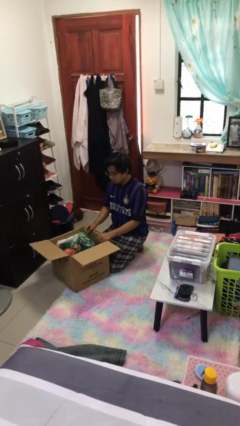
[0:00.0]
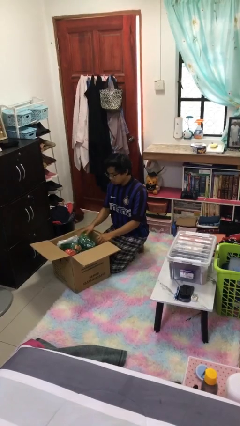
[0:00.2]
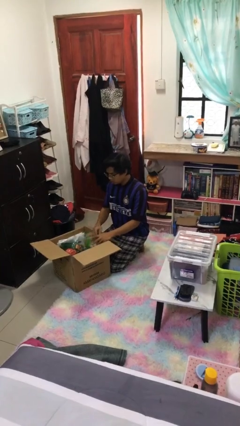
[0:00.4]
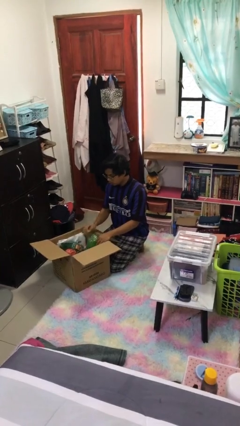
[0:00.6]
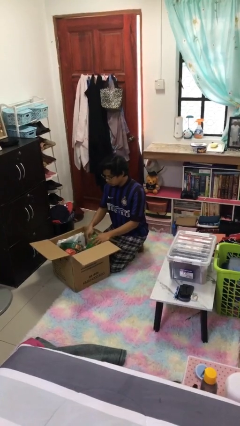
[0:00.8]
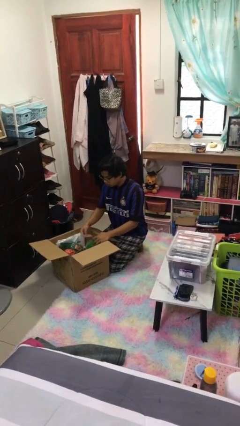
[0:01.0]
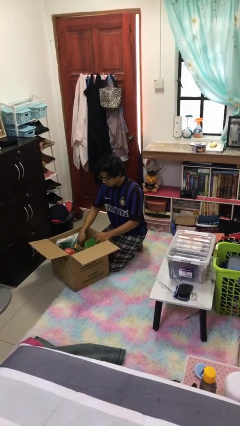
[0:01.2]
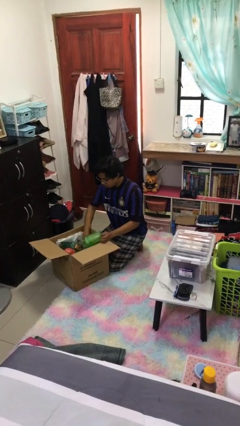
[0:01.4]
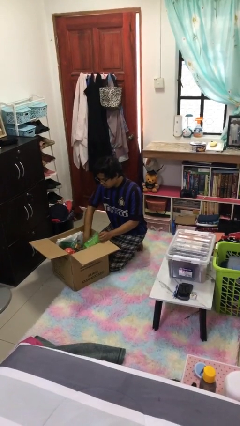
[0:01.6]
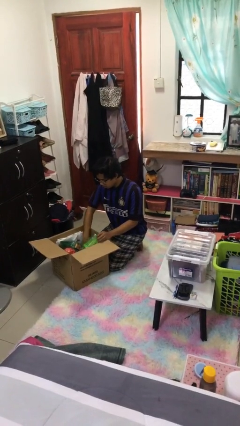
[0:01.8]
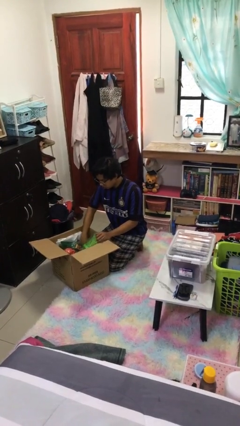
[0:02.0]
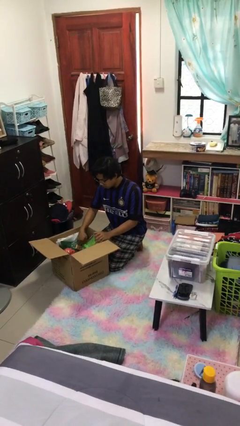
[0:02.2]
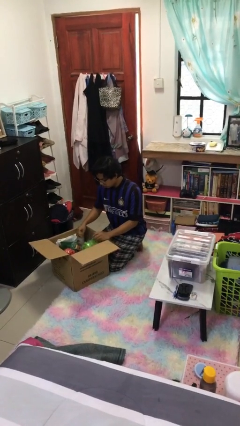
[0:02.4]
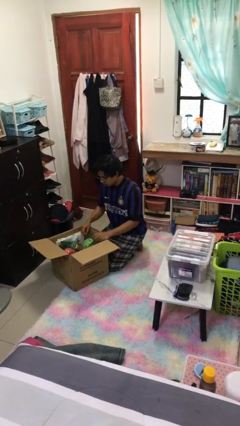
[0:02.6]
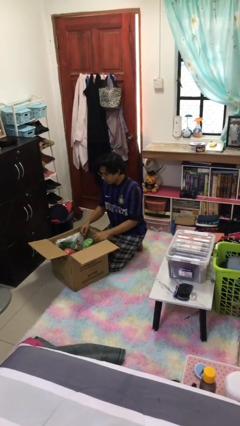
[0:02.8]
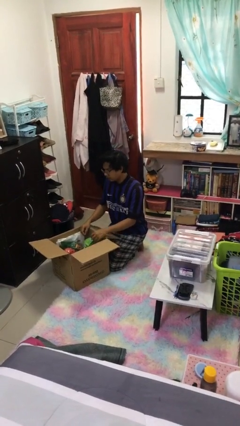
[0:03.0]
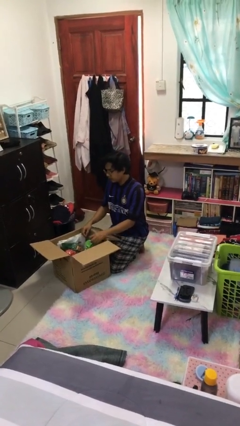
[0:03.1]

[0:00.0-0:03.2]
person searches in box

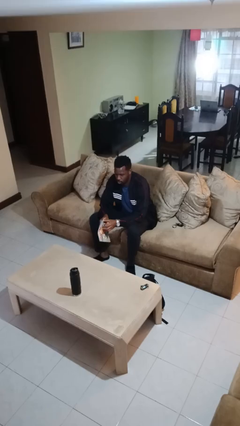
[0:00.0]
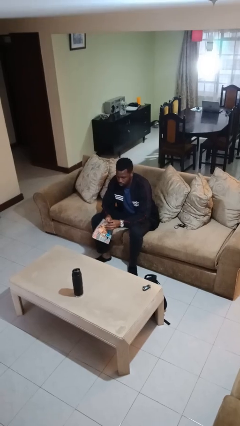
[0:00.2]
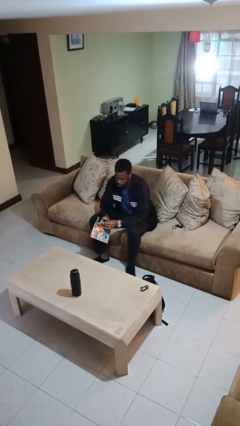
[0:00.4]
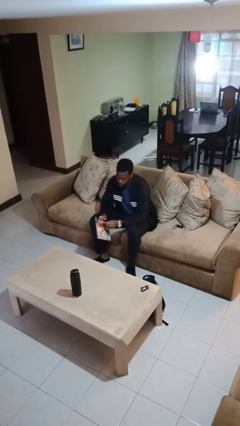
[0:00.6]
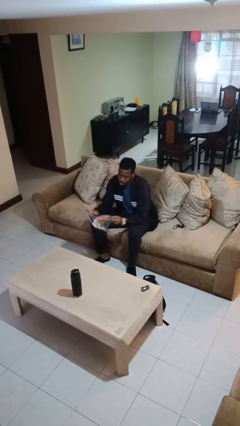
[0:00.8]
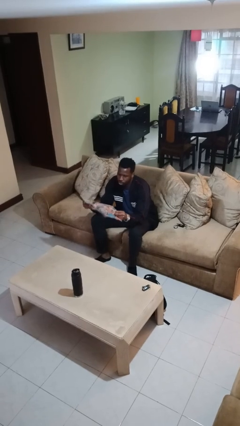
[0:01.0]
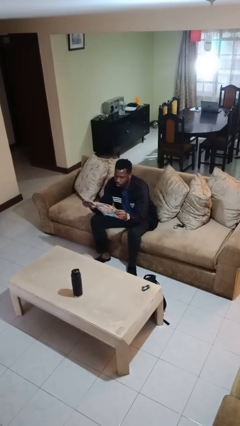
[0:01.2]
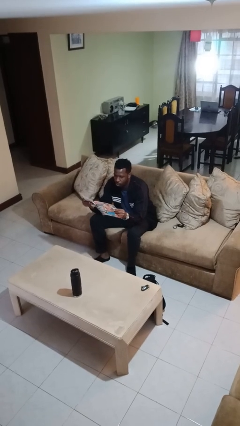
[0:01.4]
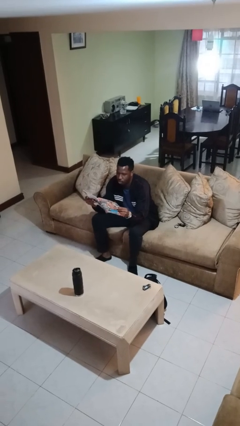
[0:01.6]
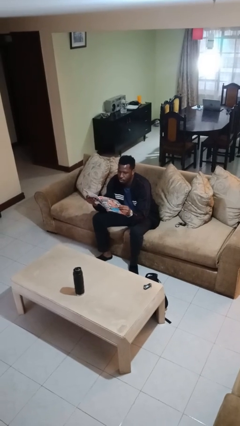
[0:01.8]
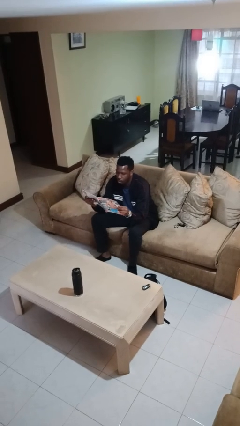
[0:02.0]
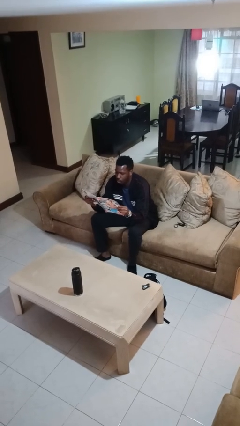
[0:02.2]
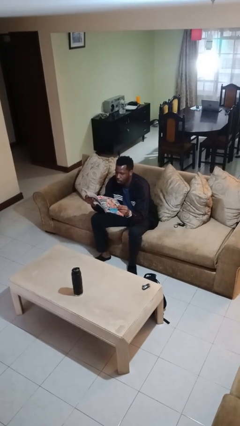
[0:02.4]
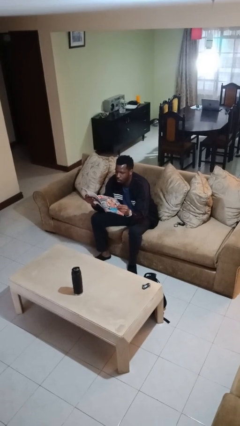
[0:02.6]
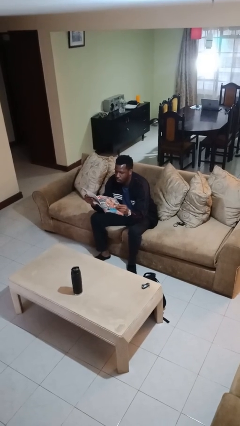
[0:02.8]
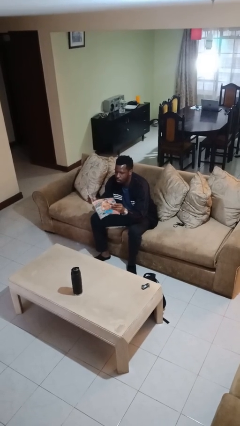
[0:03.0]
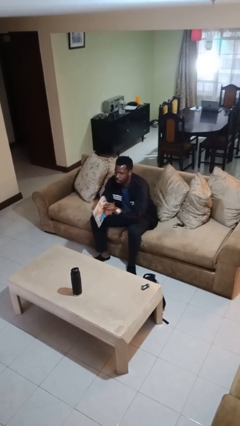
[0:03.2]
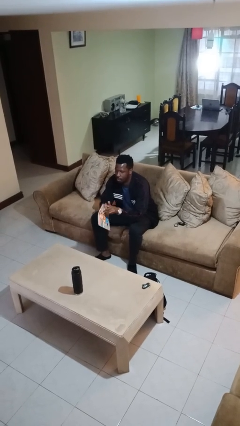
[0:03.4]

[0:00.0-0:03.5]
person reads magazine

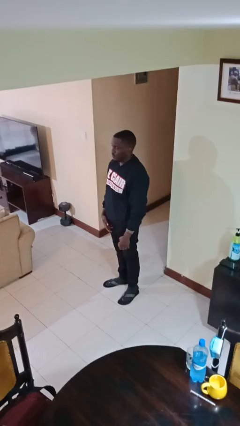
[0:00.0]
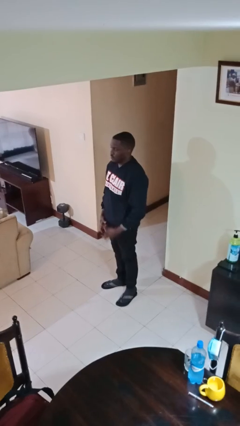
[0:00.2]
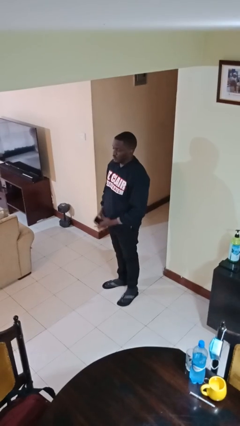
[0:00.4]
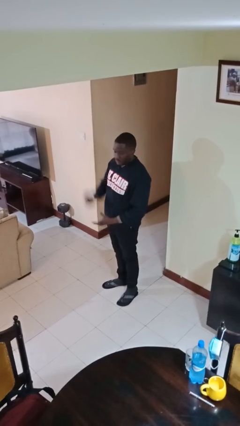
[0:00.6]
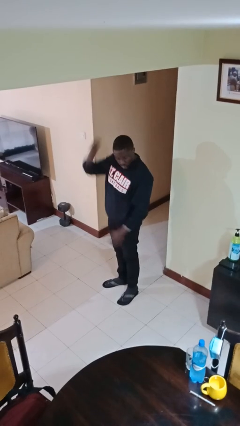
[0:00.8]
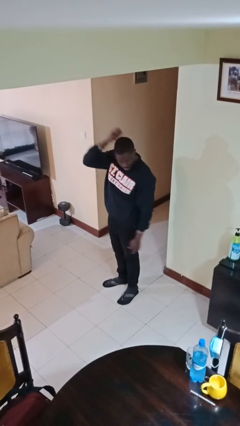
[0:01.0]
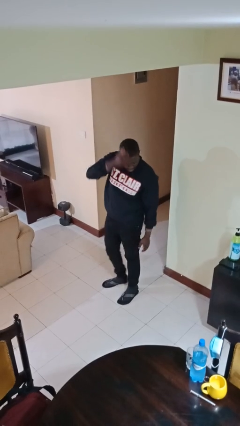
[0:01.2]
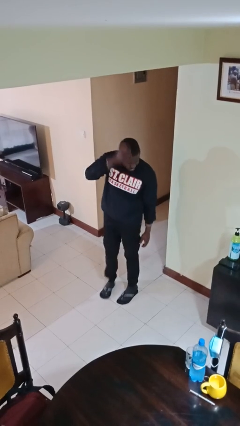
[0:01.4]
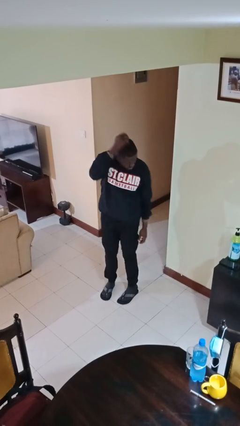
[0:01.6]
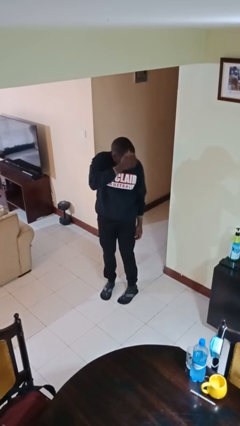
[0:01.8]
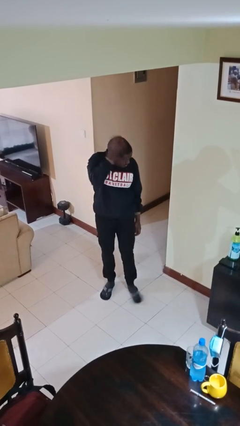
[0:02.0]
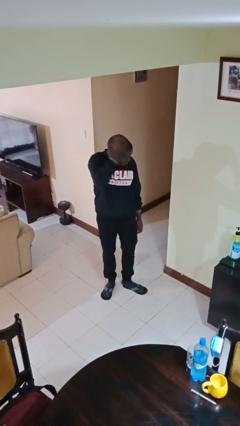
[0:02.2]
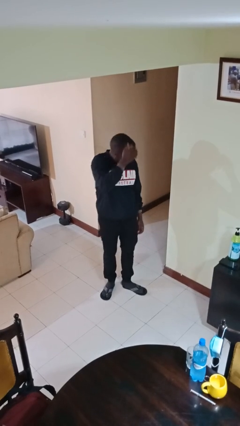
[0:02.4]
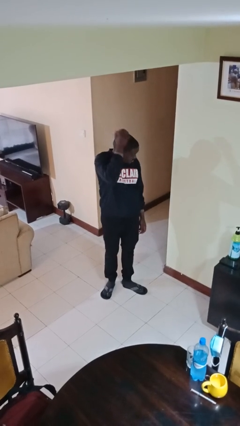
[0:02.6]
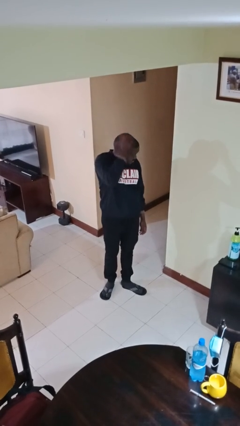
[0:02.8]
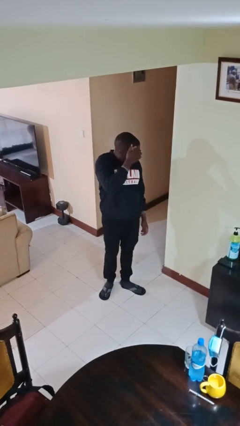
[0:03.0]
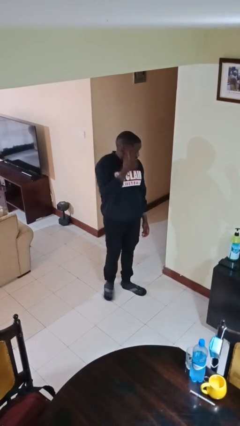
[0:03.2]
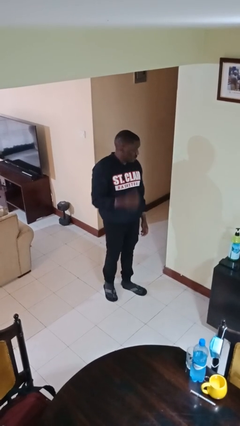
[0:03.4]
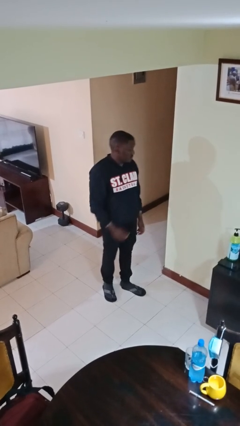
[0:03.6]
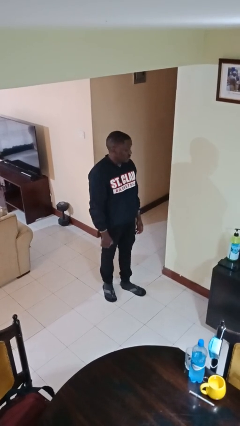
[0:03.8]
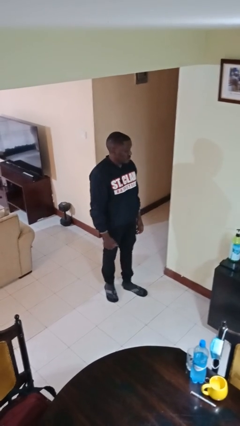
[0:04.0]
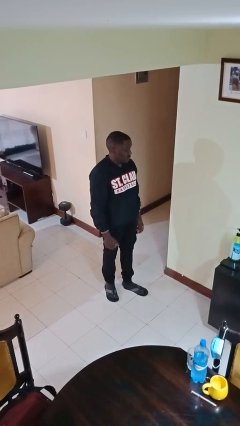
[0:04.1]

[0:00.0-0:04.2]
person brushes hair

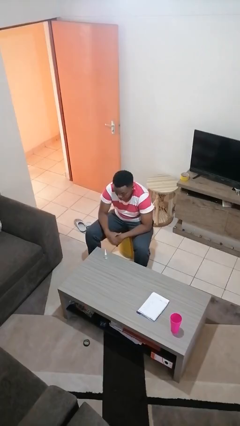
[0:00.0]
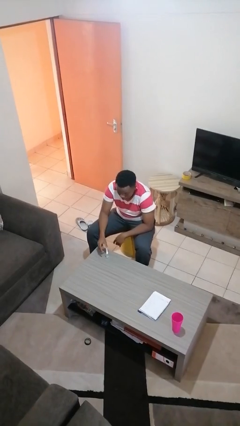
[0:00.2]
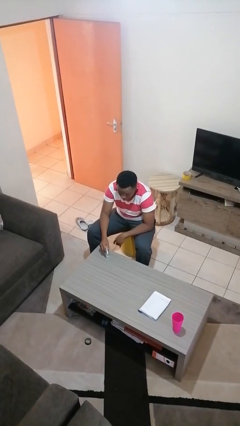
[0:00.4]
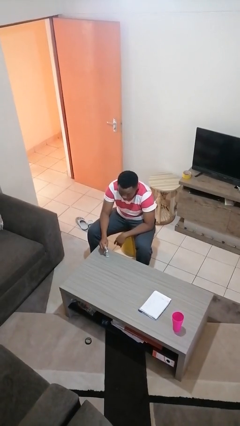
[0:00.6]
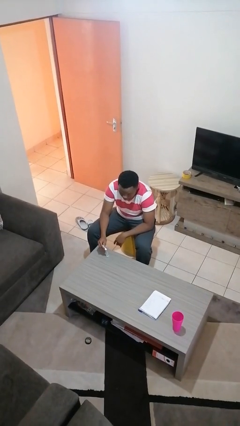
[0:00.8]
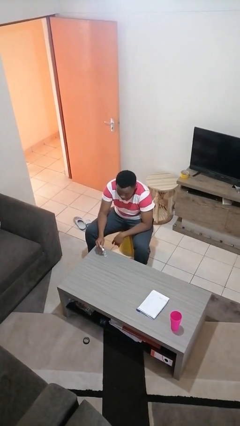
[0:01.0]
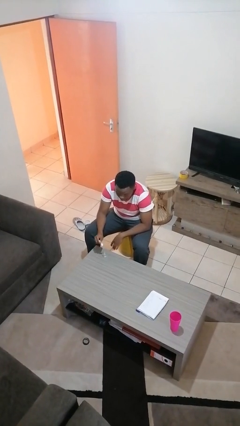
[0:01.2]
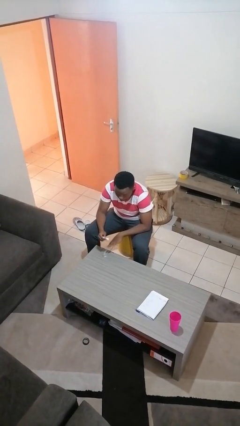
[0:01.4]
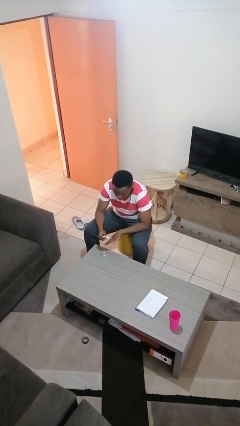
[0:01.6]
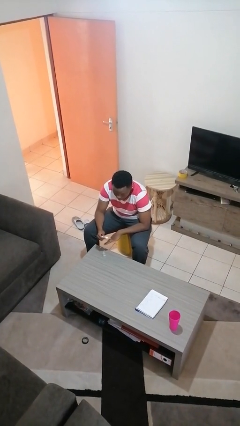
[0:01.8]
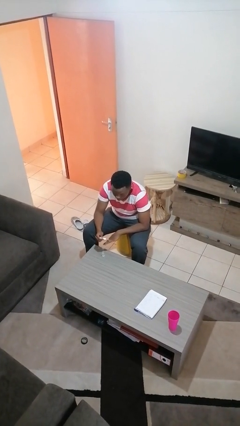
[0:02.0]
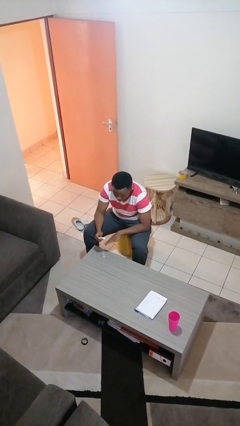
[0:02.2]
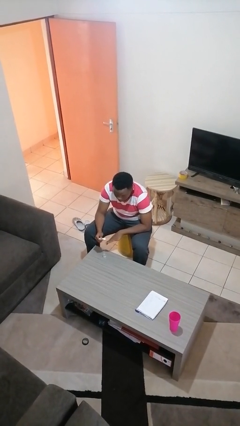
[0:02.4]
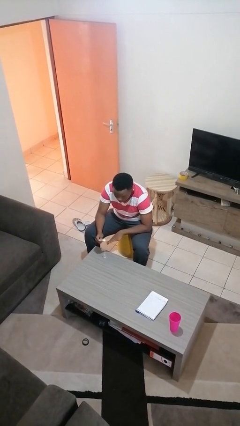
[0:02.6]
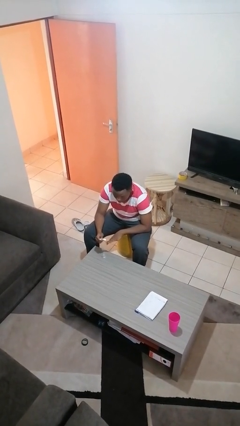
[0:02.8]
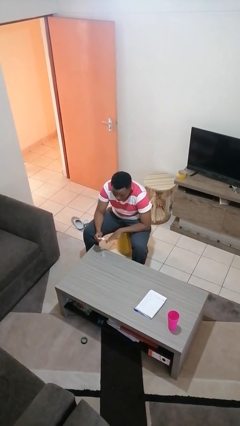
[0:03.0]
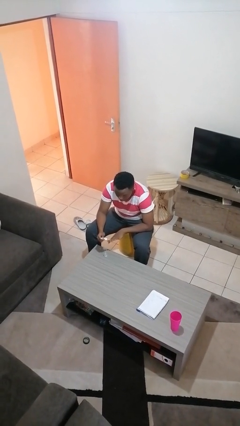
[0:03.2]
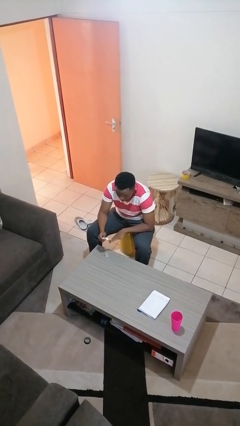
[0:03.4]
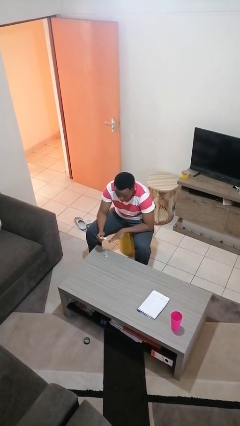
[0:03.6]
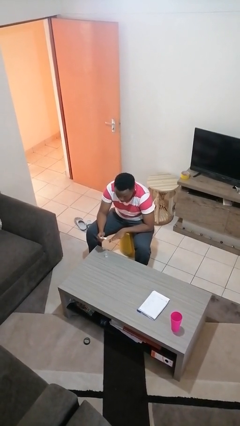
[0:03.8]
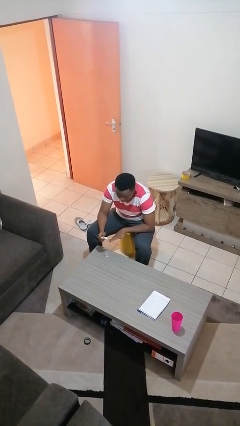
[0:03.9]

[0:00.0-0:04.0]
person paints fingernails

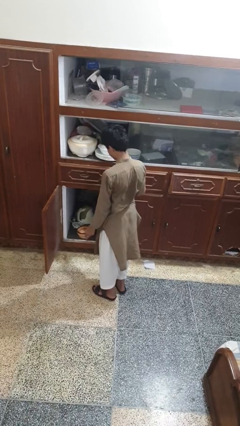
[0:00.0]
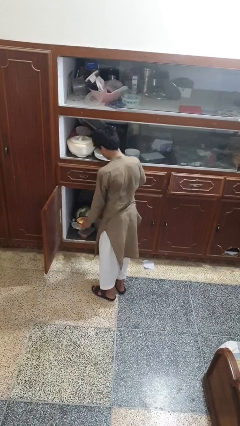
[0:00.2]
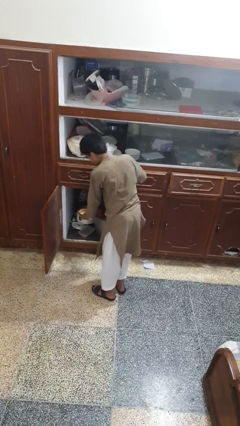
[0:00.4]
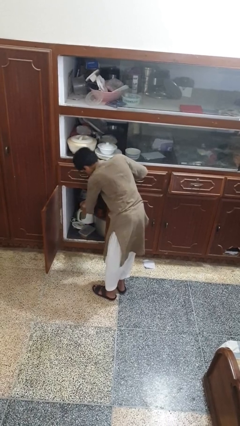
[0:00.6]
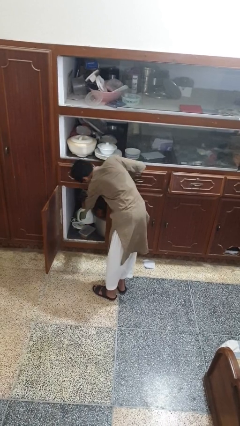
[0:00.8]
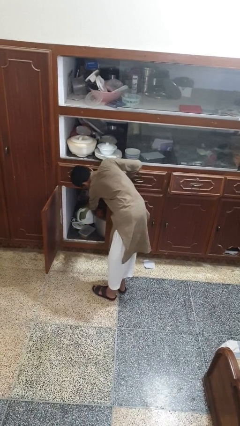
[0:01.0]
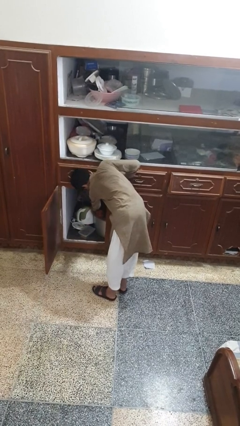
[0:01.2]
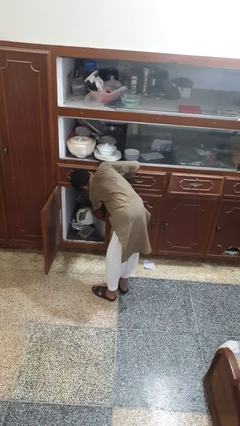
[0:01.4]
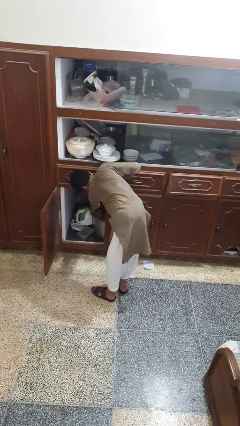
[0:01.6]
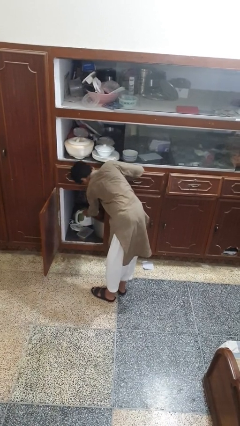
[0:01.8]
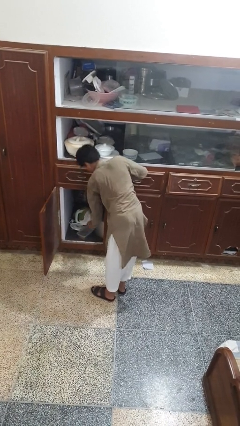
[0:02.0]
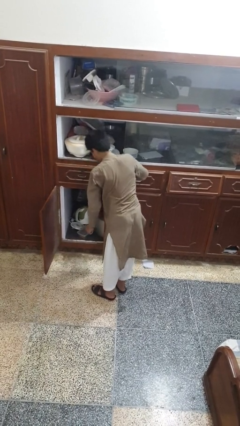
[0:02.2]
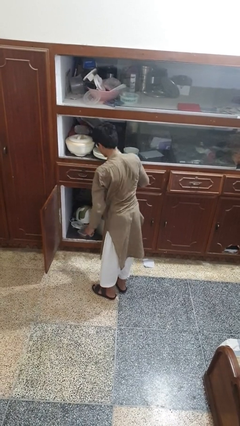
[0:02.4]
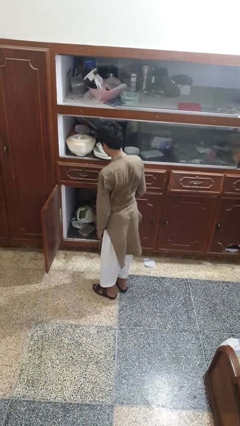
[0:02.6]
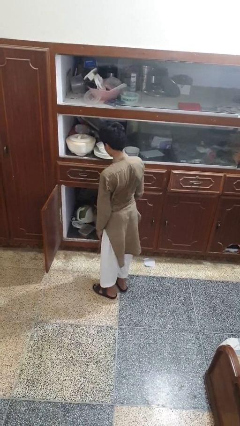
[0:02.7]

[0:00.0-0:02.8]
person puts object in cabinet
